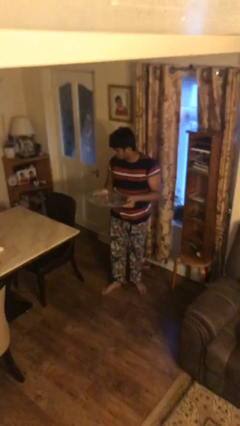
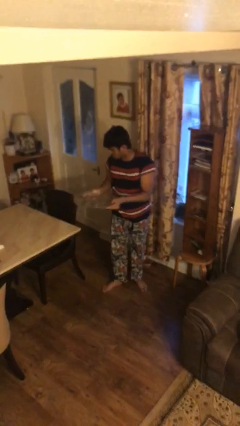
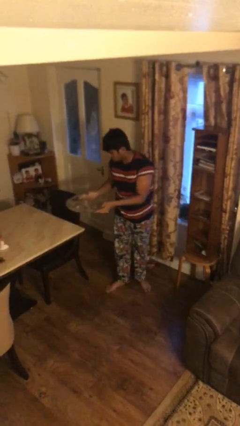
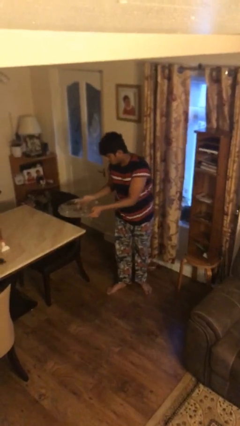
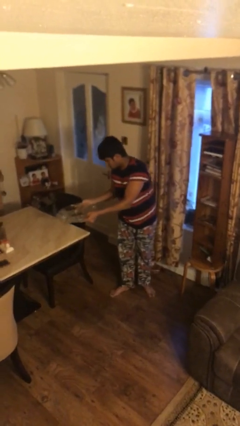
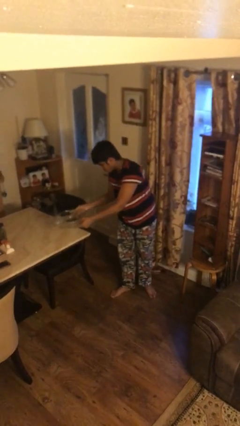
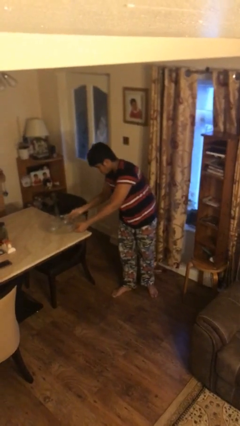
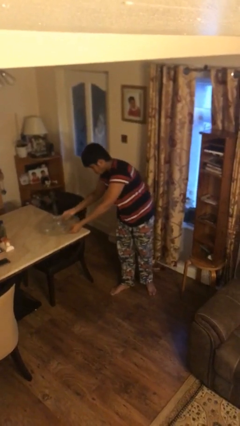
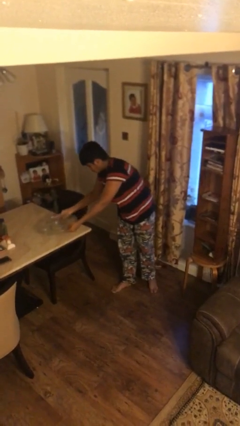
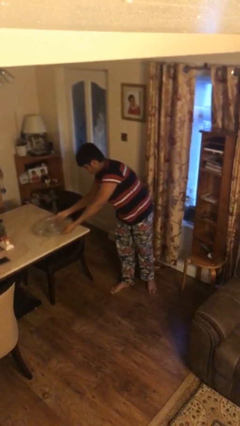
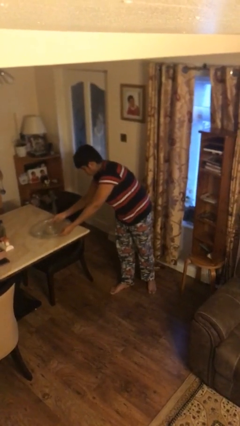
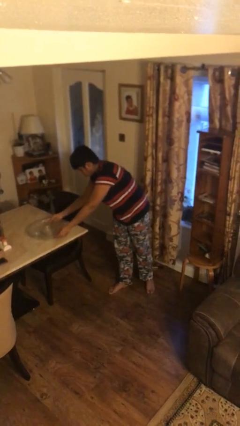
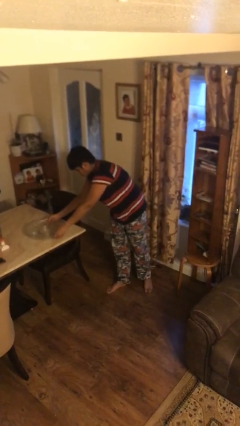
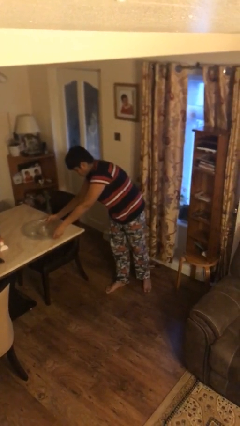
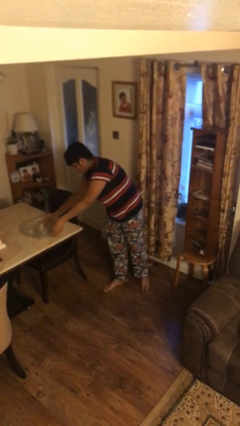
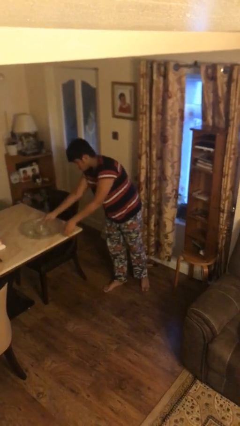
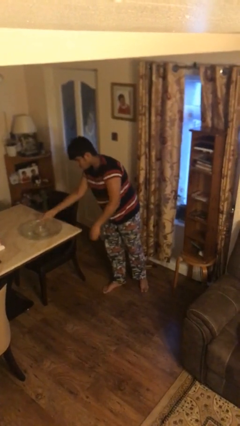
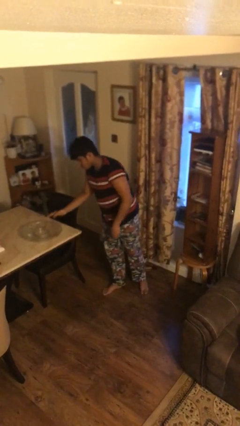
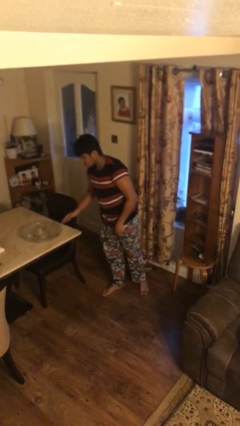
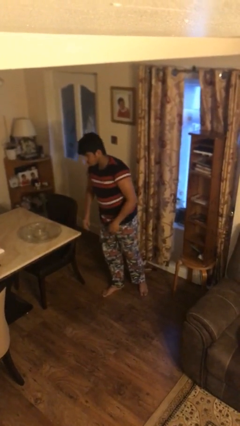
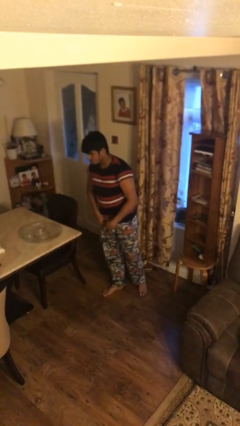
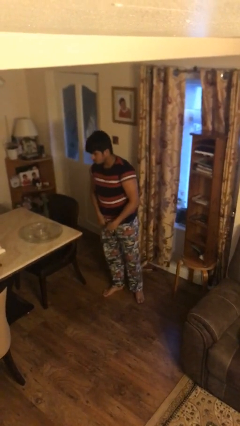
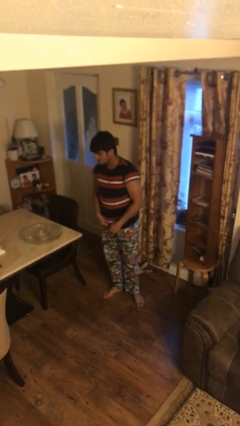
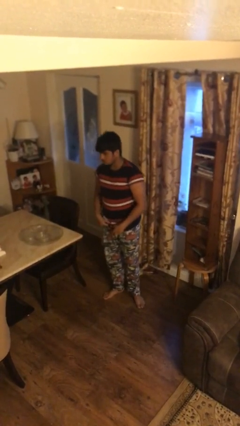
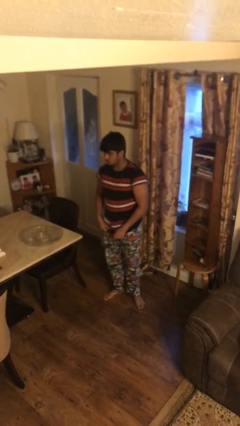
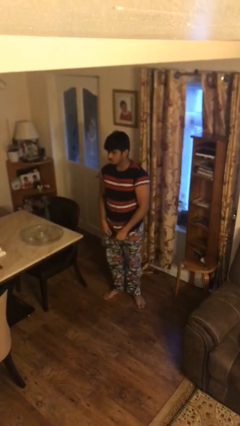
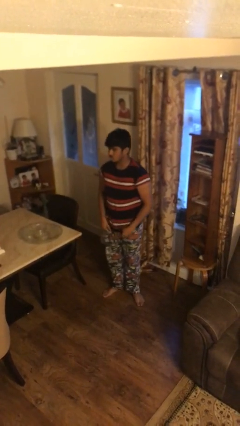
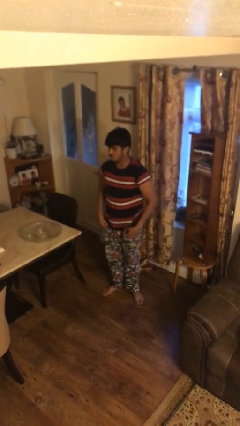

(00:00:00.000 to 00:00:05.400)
person puts down object on table

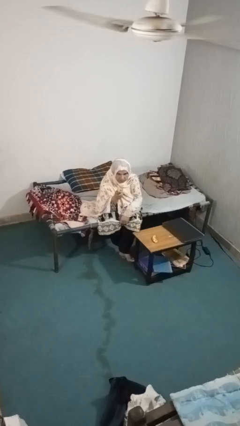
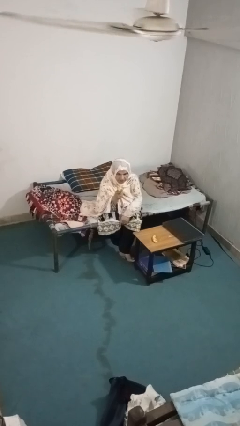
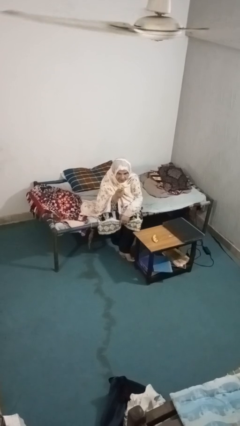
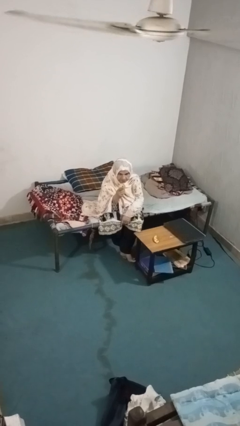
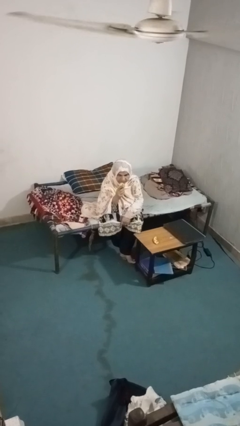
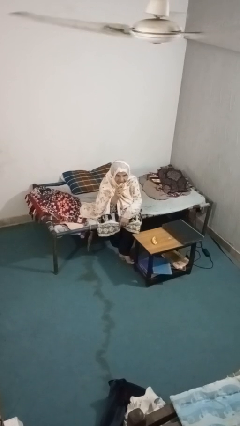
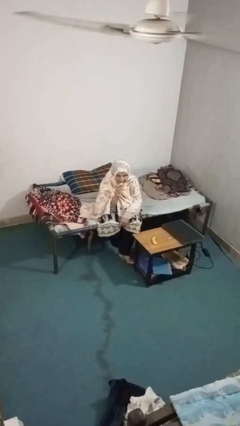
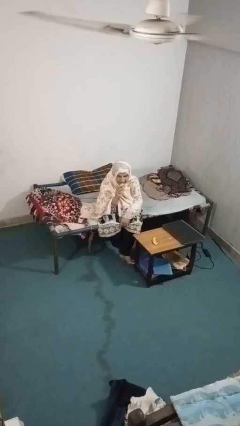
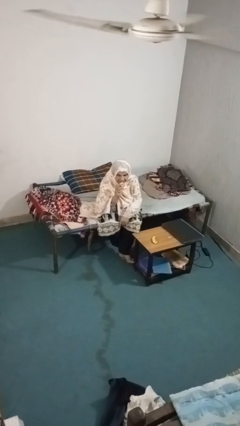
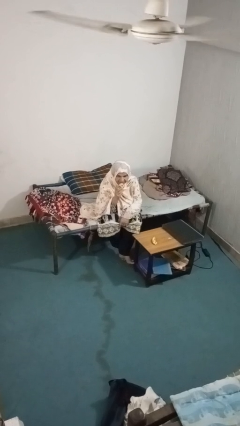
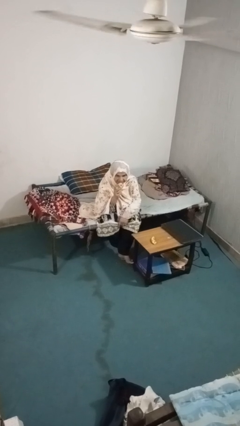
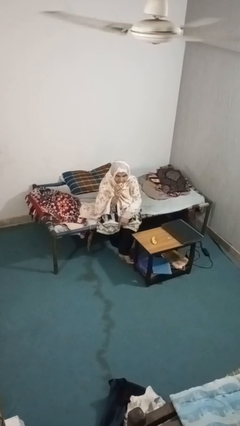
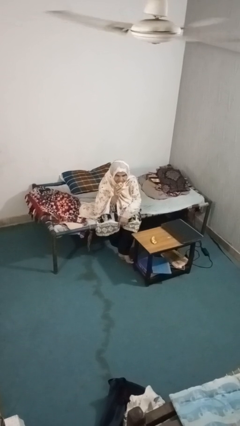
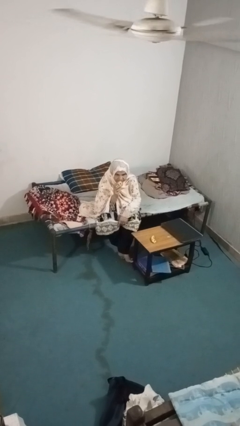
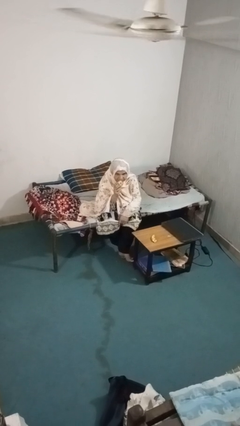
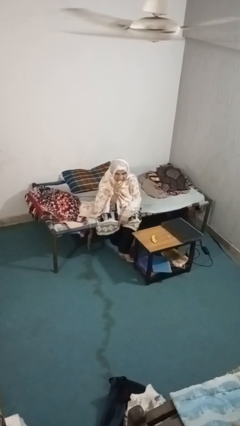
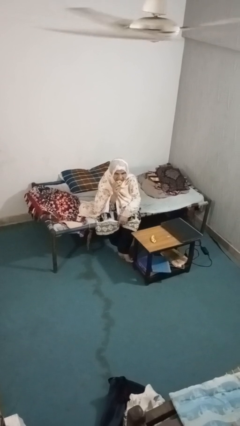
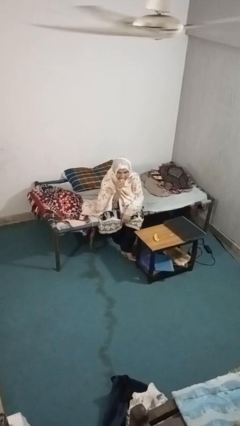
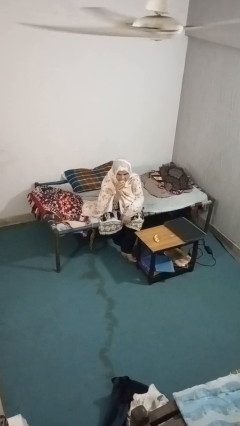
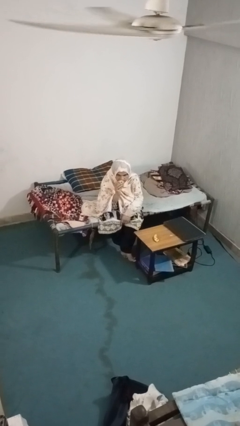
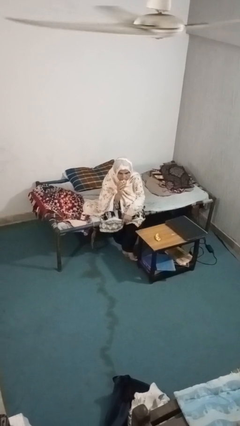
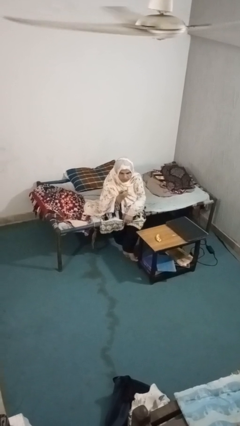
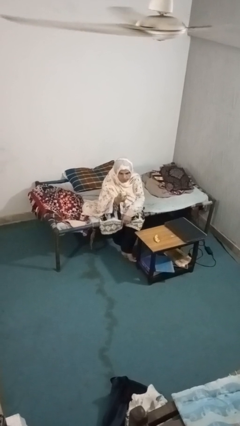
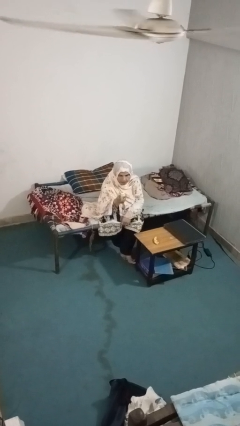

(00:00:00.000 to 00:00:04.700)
person eats apple

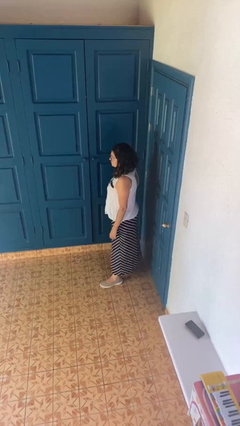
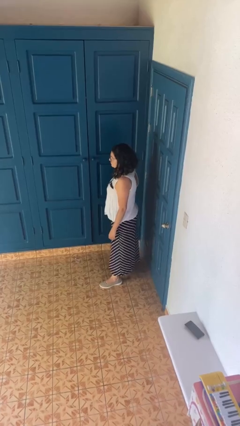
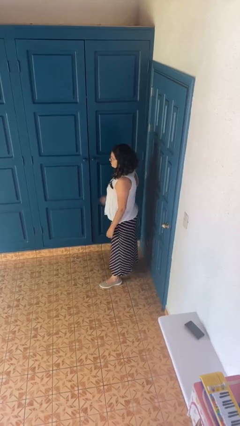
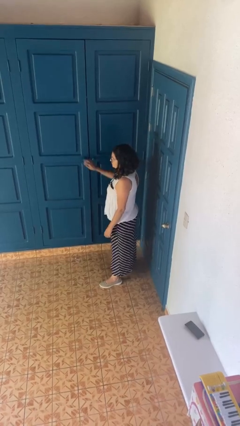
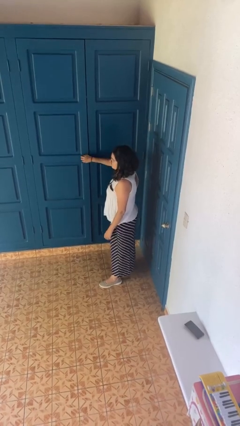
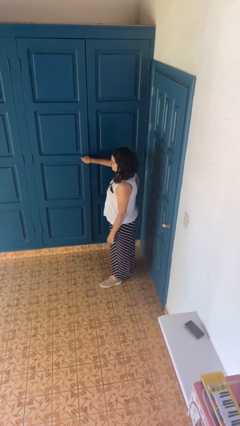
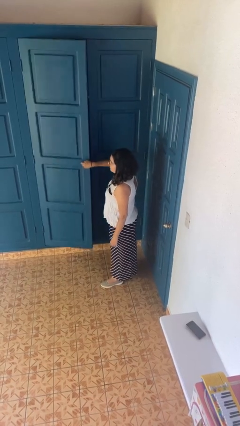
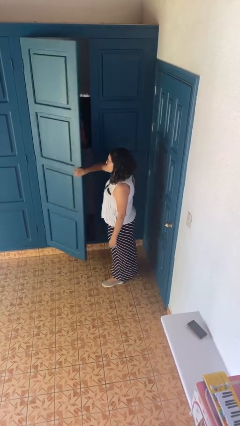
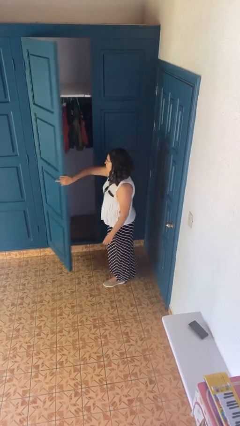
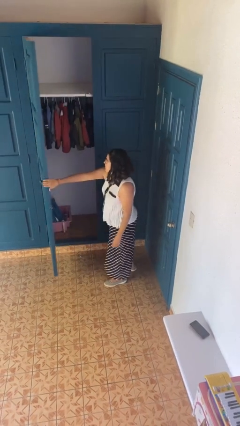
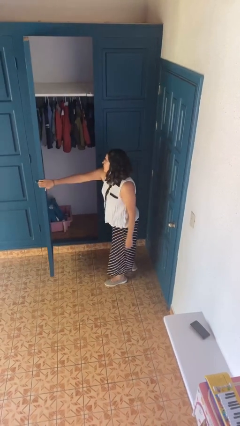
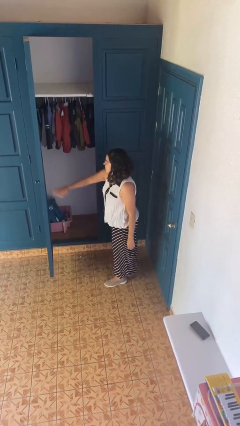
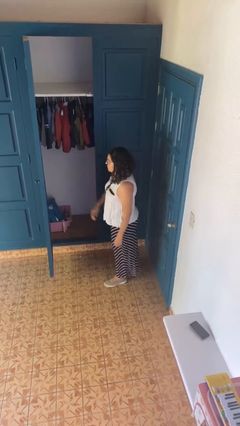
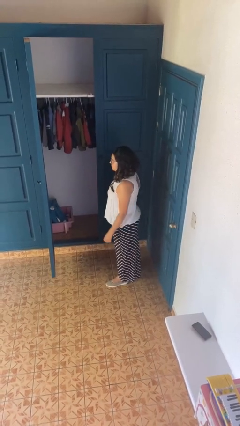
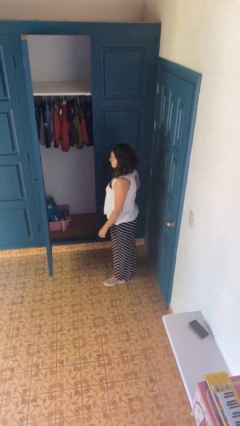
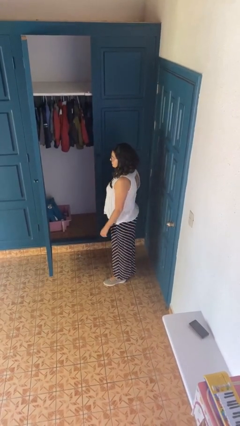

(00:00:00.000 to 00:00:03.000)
person opens closet door

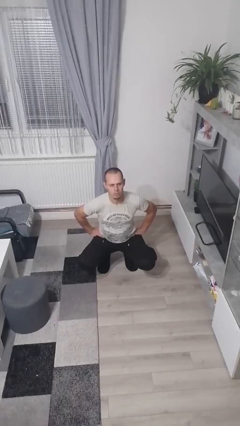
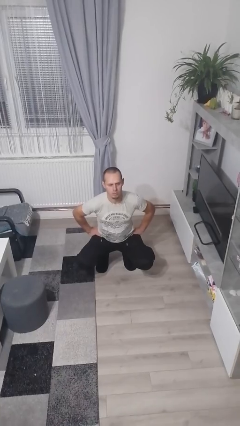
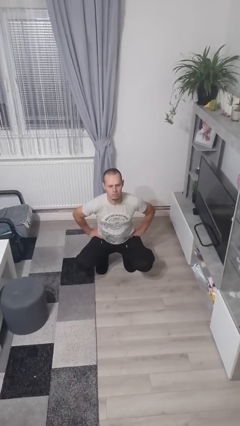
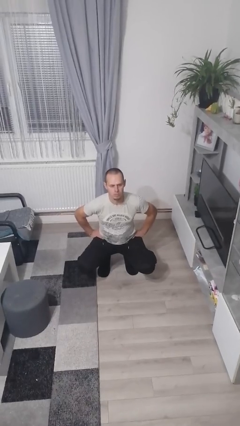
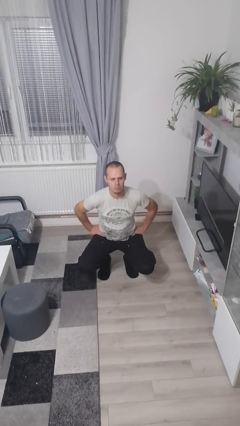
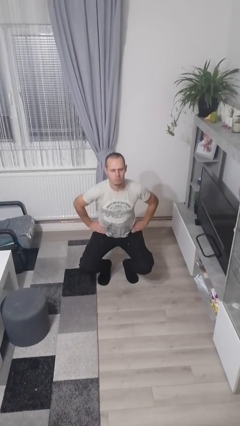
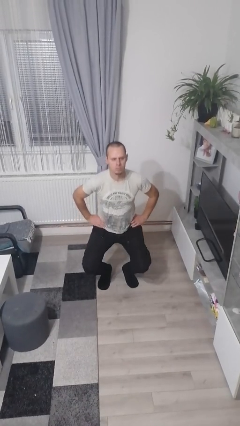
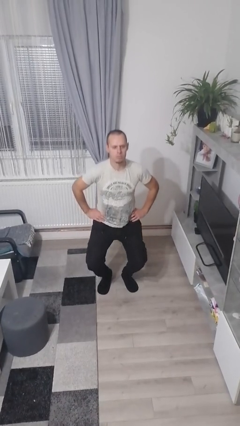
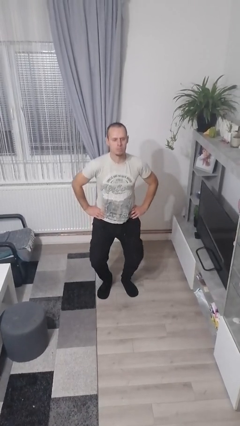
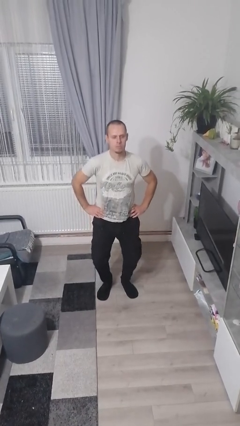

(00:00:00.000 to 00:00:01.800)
person stands up

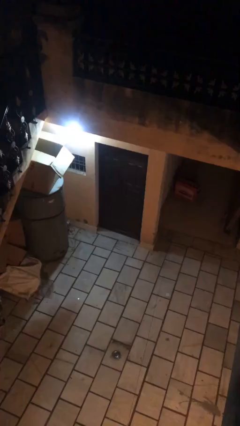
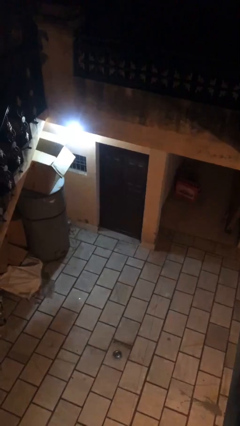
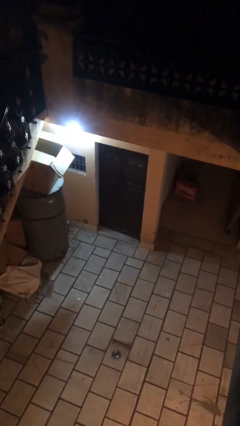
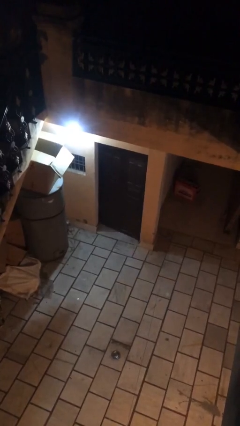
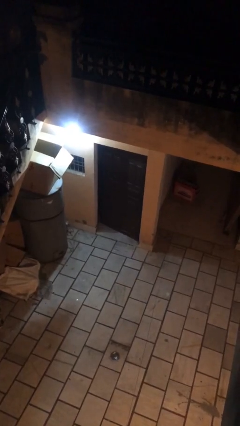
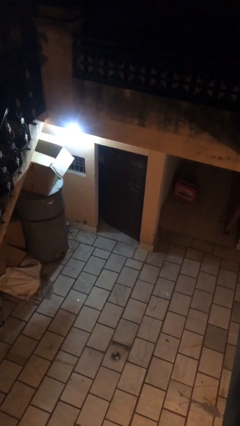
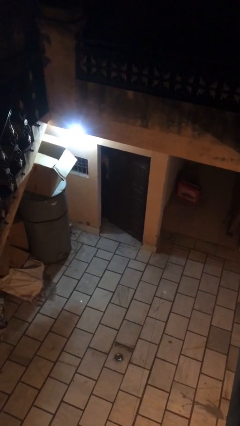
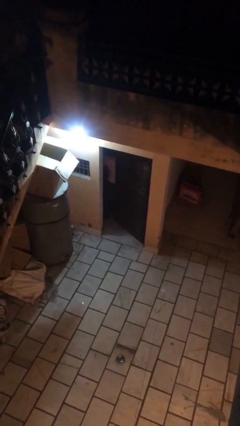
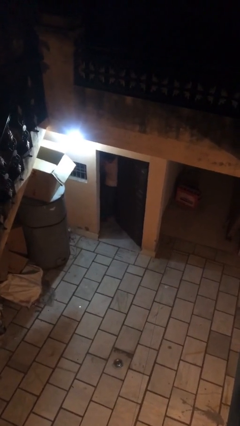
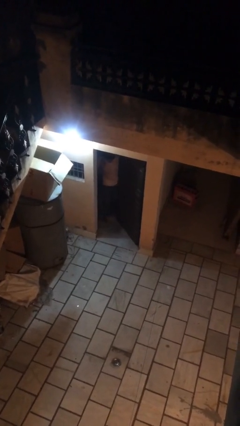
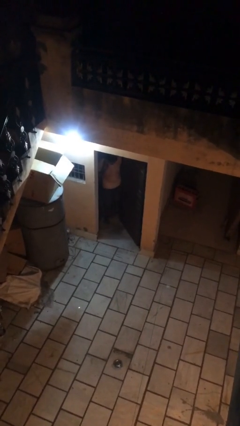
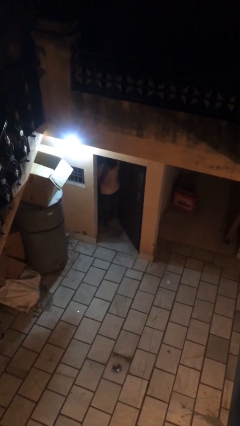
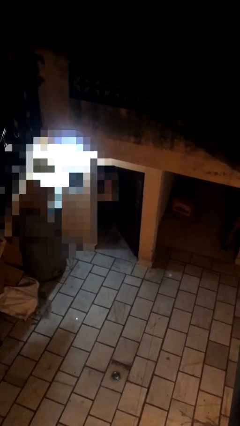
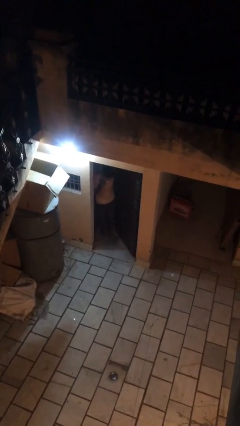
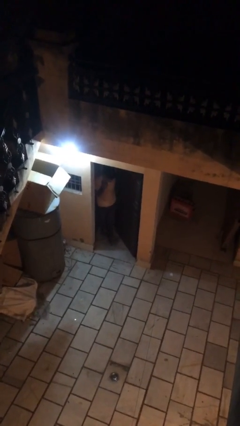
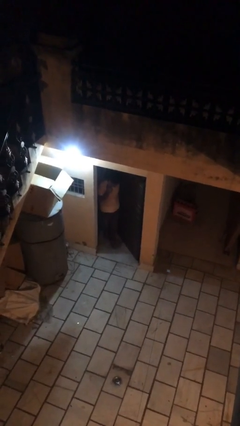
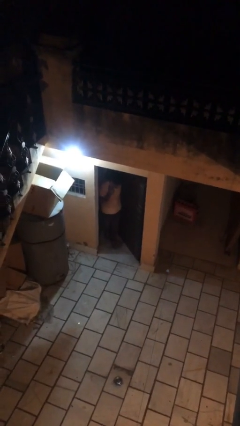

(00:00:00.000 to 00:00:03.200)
person opens facility door

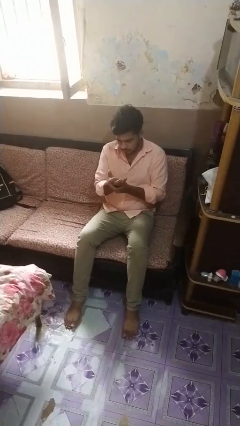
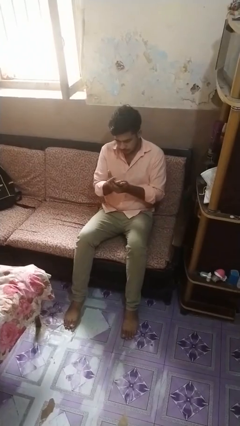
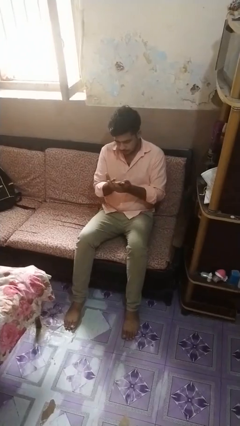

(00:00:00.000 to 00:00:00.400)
person looks at hands in lap
